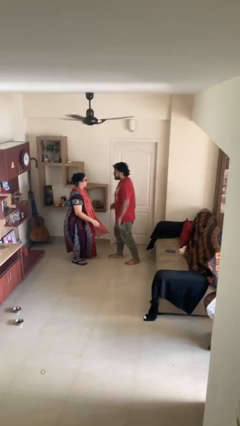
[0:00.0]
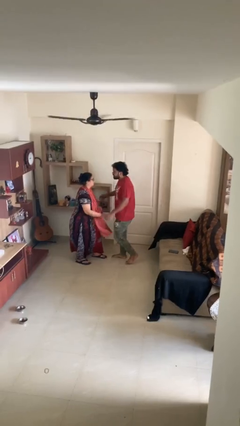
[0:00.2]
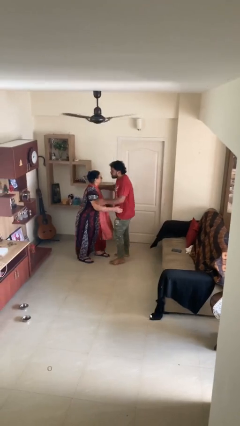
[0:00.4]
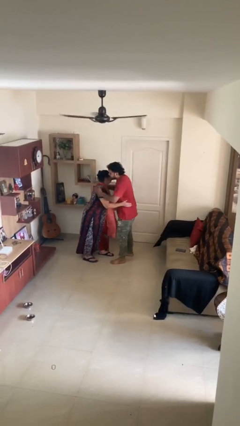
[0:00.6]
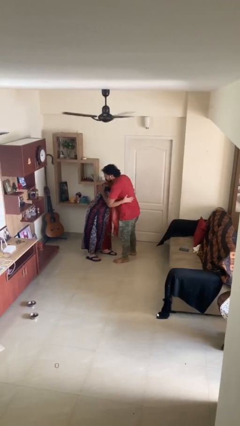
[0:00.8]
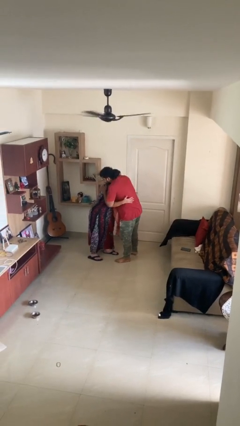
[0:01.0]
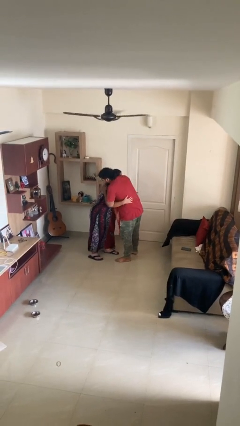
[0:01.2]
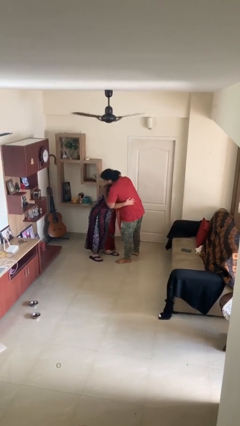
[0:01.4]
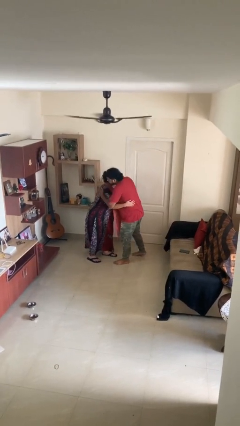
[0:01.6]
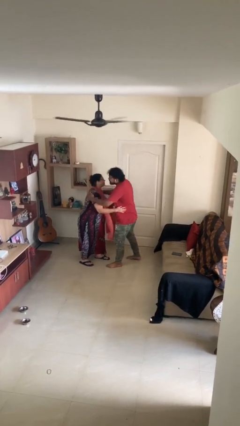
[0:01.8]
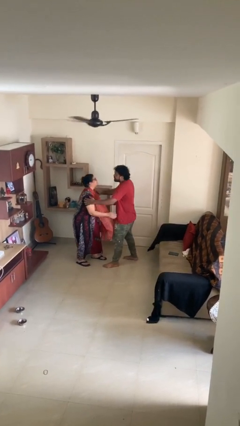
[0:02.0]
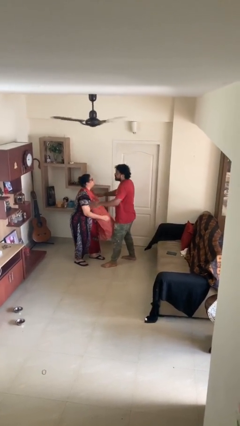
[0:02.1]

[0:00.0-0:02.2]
person embraces person

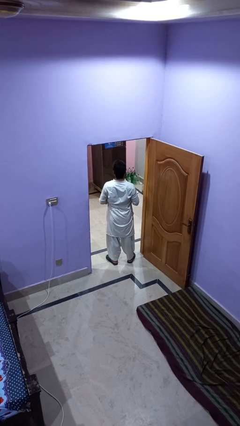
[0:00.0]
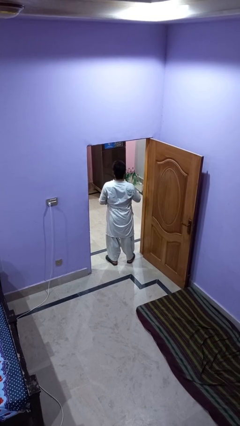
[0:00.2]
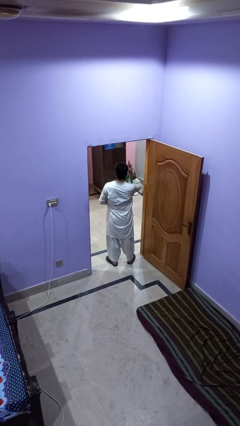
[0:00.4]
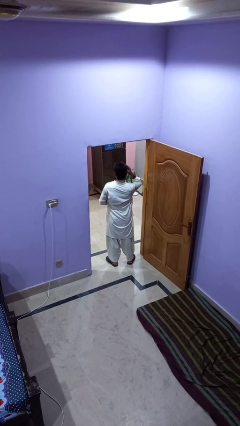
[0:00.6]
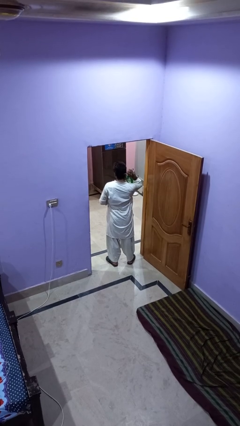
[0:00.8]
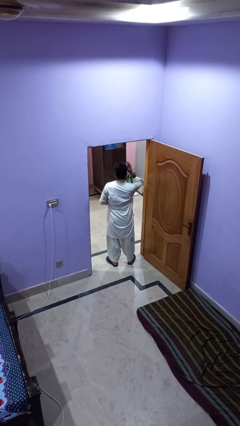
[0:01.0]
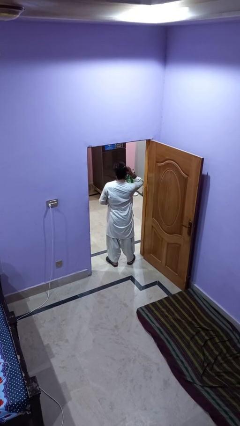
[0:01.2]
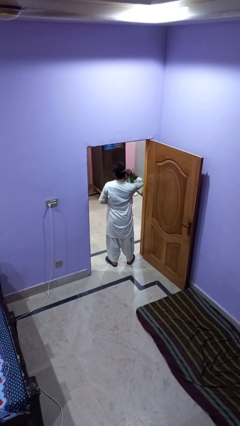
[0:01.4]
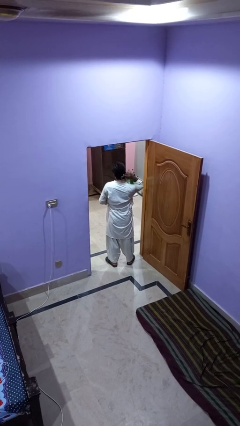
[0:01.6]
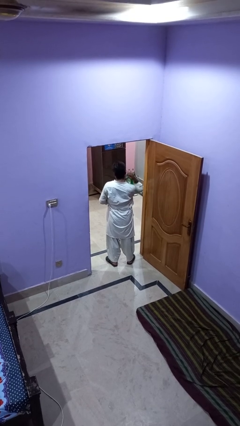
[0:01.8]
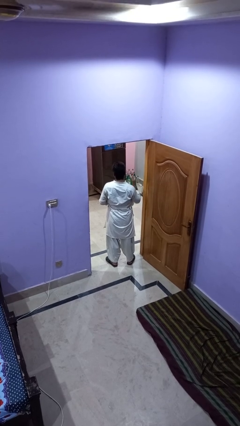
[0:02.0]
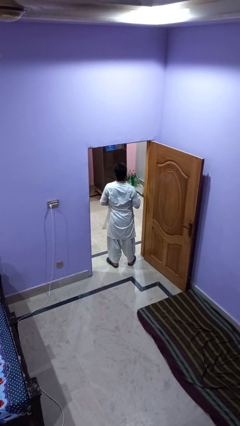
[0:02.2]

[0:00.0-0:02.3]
person brushes hair

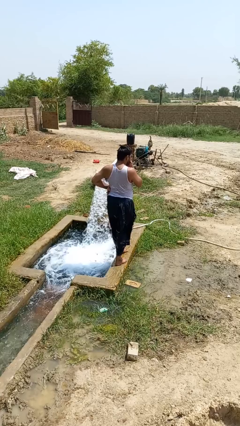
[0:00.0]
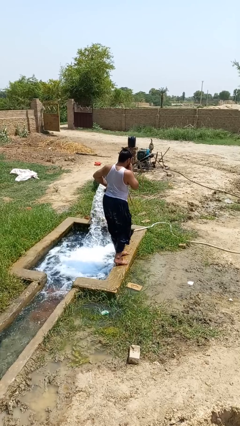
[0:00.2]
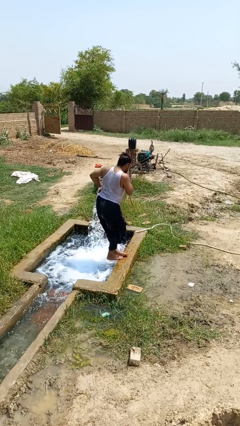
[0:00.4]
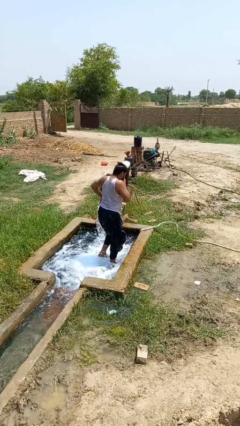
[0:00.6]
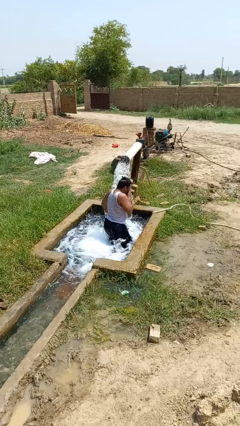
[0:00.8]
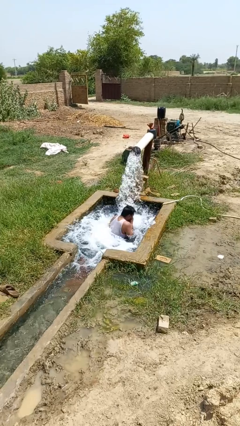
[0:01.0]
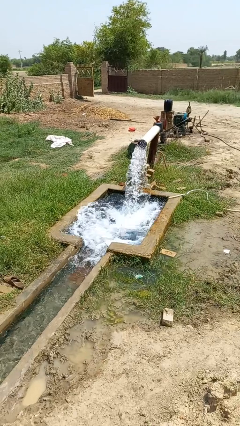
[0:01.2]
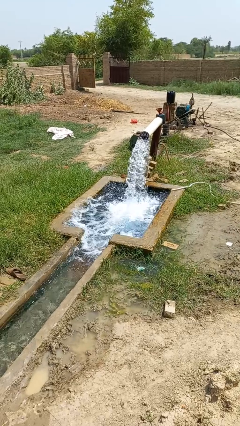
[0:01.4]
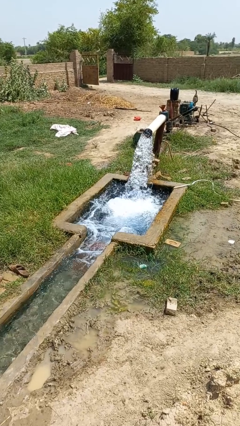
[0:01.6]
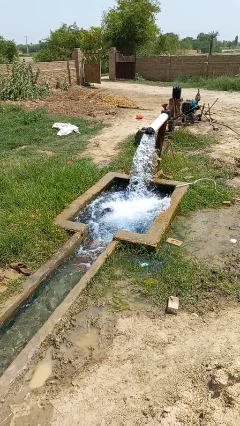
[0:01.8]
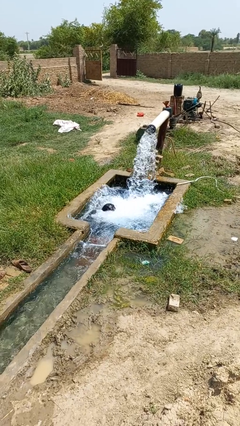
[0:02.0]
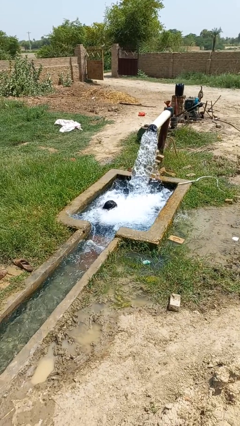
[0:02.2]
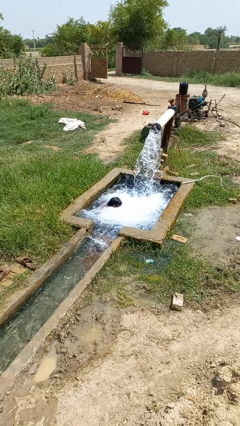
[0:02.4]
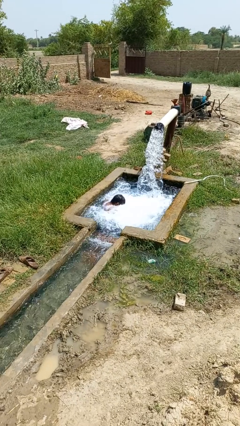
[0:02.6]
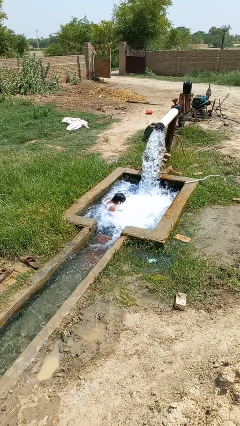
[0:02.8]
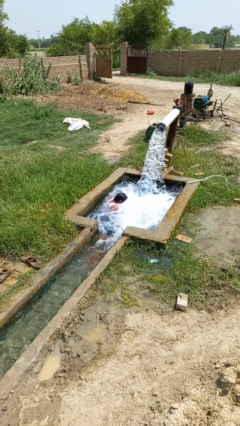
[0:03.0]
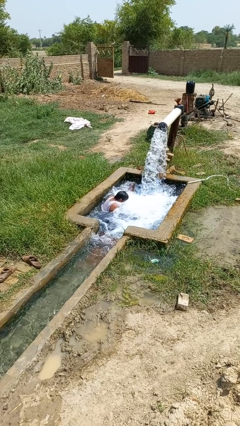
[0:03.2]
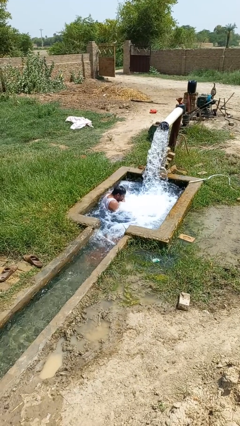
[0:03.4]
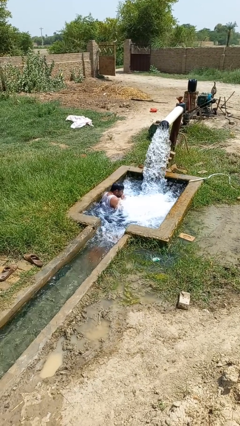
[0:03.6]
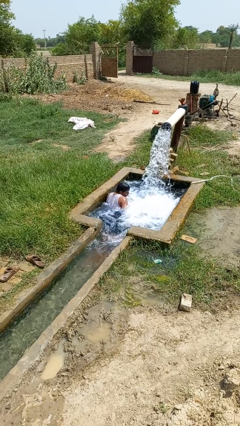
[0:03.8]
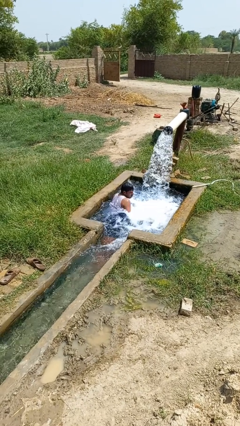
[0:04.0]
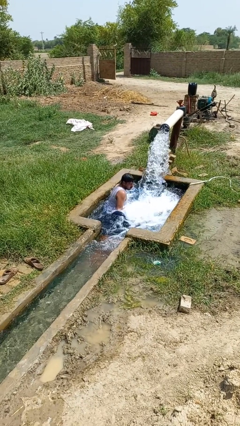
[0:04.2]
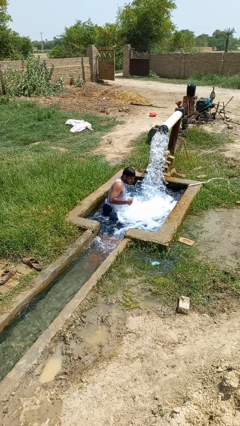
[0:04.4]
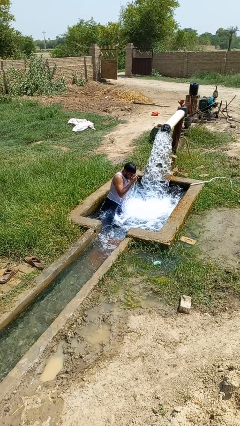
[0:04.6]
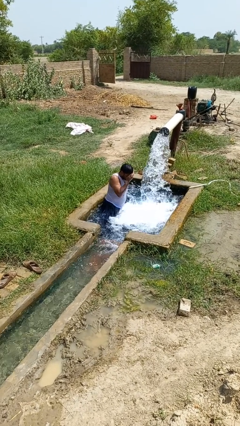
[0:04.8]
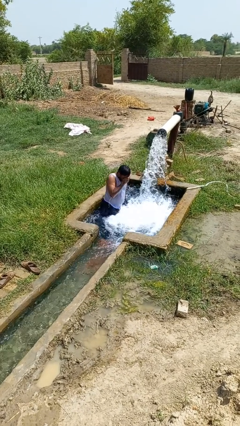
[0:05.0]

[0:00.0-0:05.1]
person falls into pool

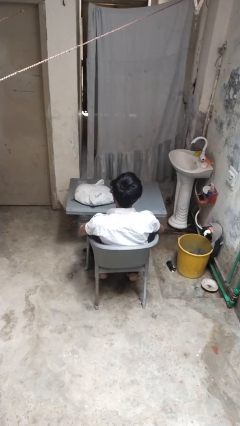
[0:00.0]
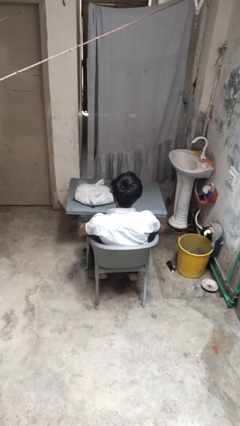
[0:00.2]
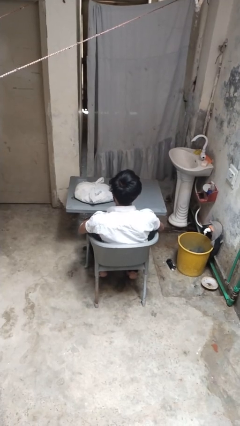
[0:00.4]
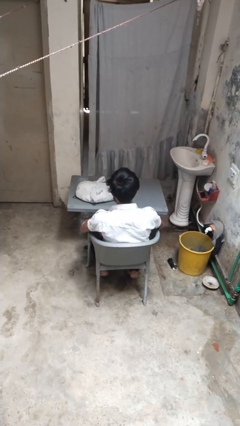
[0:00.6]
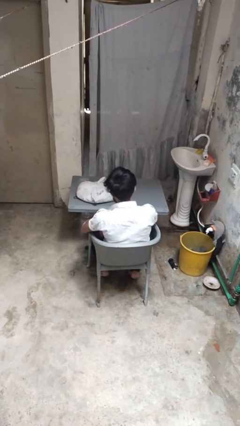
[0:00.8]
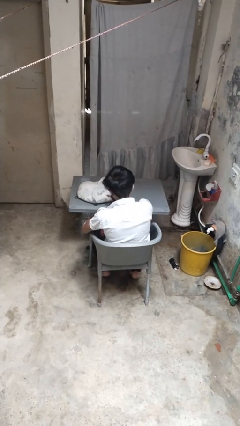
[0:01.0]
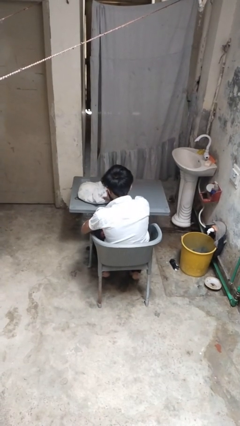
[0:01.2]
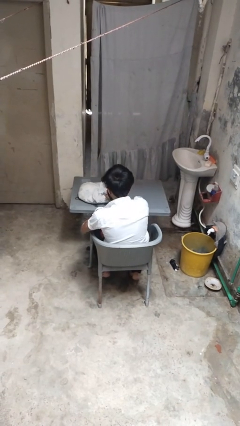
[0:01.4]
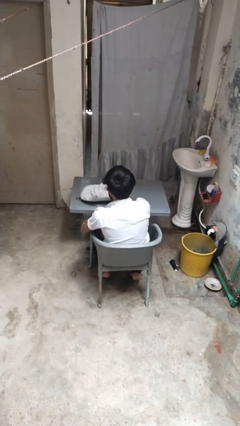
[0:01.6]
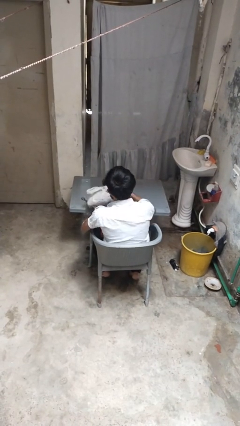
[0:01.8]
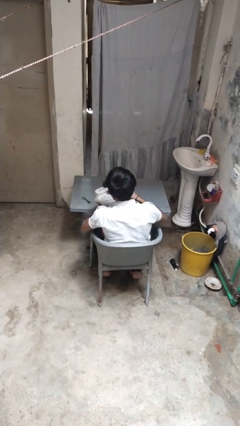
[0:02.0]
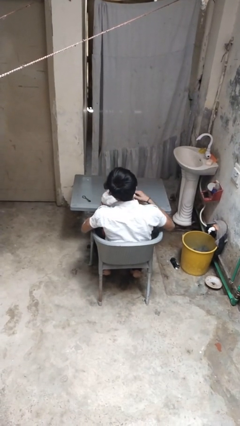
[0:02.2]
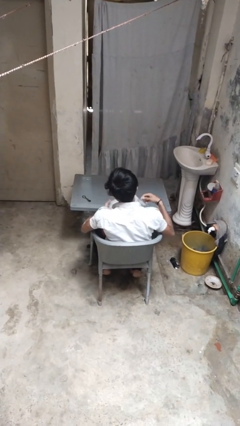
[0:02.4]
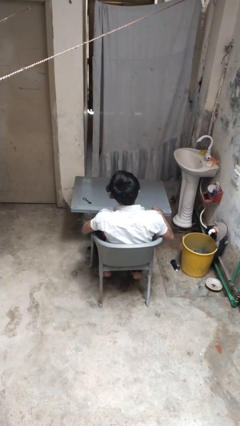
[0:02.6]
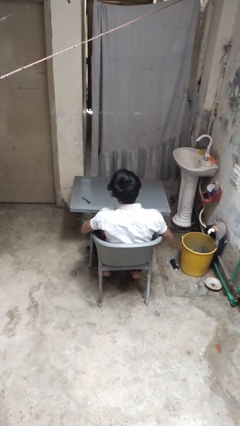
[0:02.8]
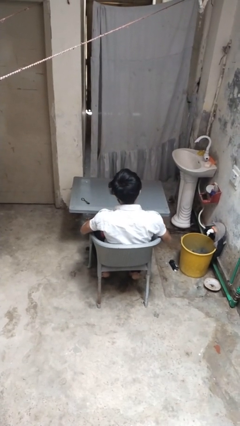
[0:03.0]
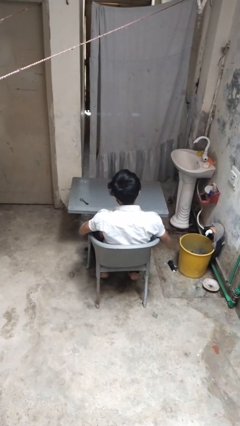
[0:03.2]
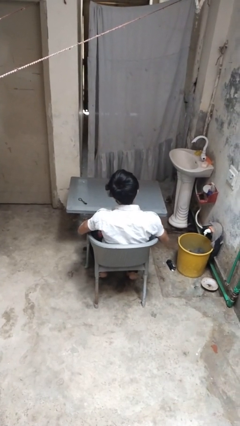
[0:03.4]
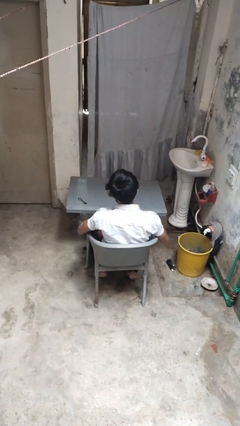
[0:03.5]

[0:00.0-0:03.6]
person picks up object from table

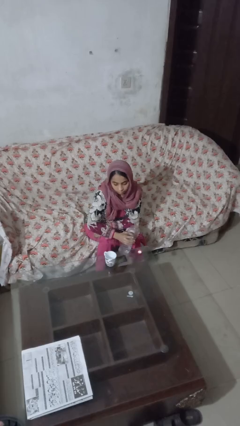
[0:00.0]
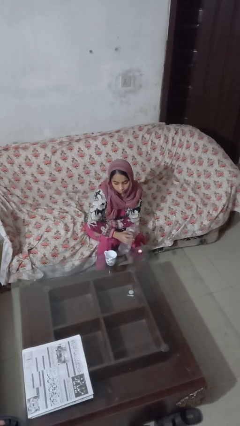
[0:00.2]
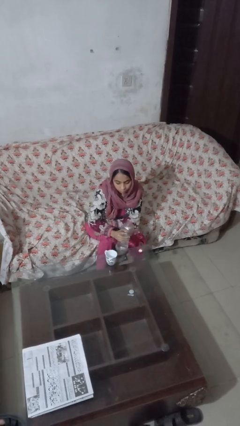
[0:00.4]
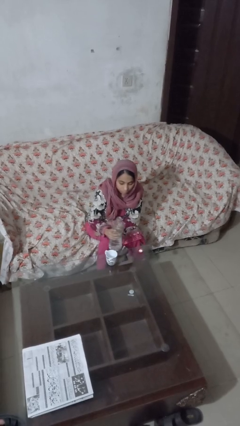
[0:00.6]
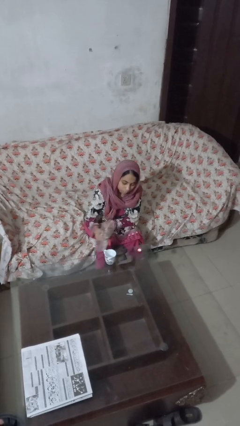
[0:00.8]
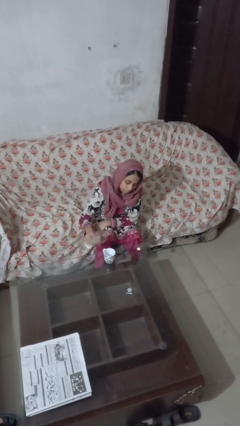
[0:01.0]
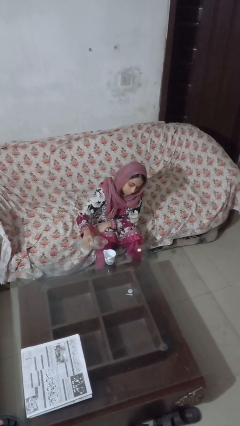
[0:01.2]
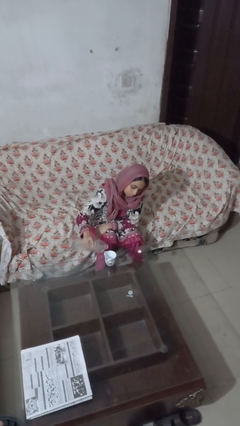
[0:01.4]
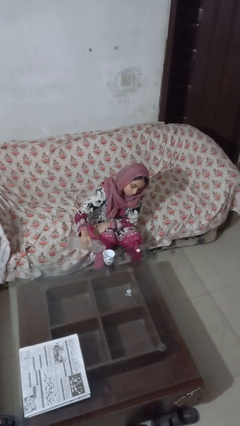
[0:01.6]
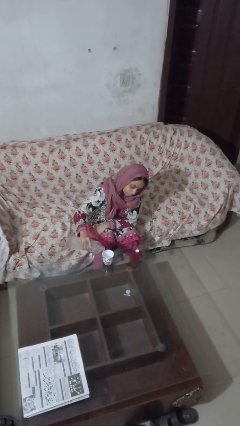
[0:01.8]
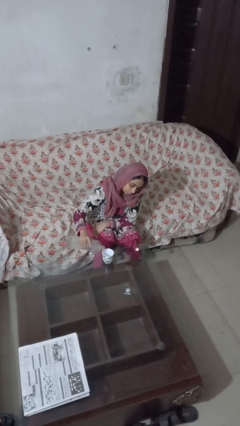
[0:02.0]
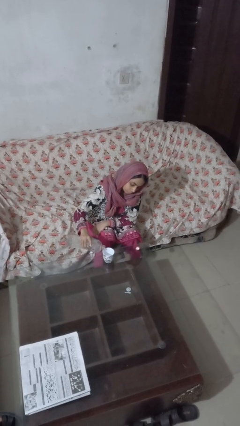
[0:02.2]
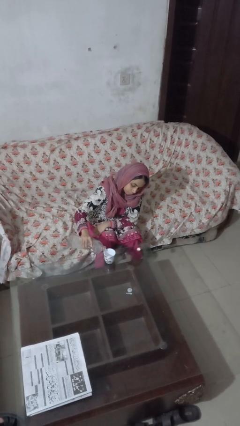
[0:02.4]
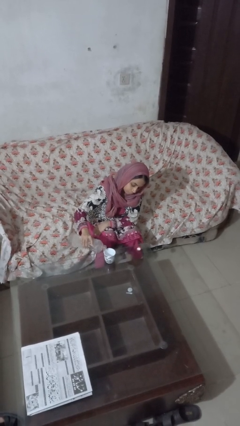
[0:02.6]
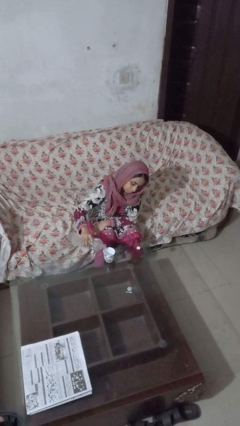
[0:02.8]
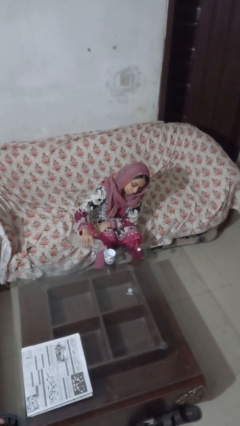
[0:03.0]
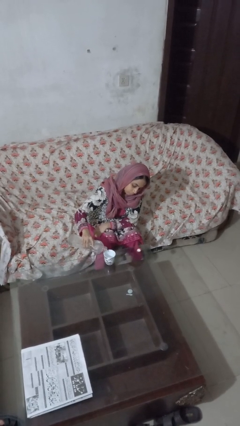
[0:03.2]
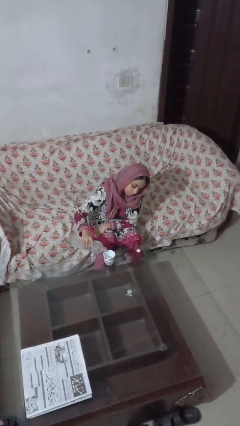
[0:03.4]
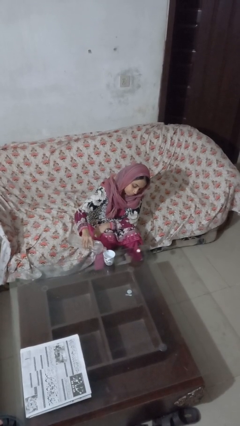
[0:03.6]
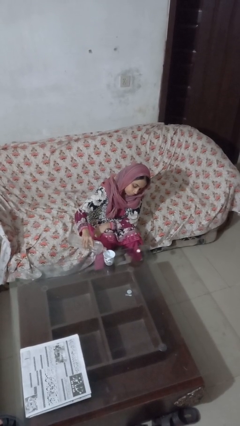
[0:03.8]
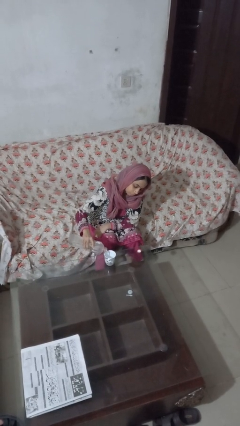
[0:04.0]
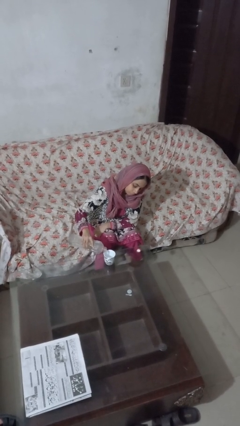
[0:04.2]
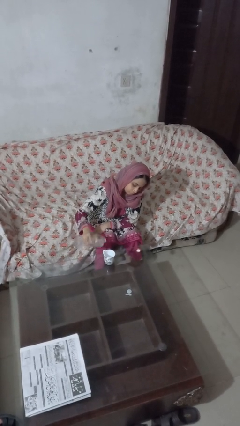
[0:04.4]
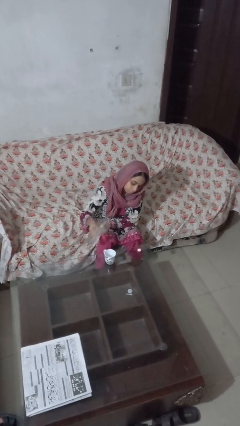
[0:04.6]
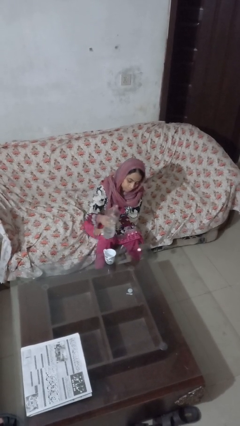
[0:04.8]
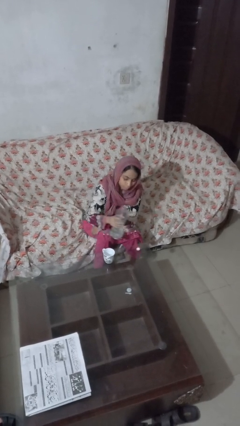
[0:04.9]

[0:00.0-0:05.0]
person pours liquid into cup
